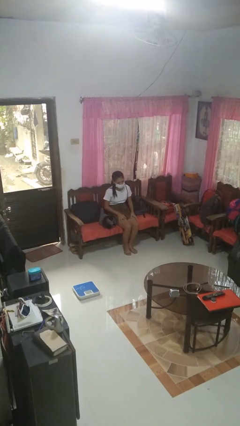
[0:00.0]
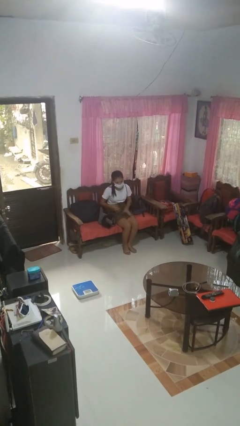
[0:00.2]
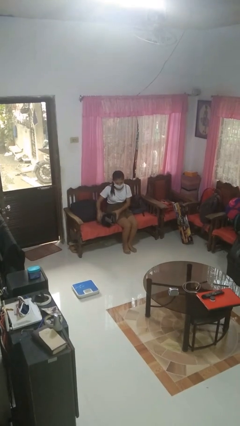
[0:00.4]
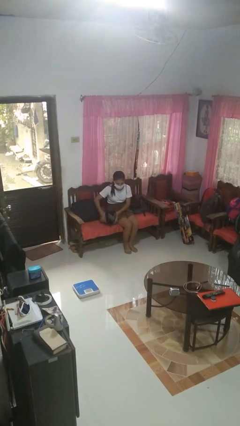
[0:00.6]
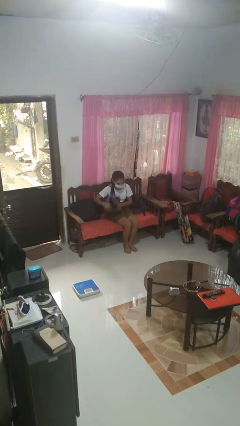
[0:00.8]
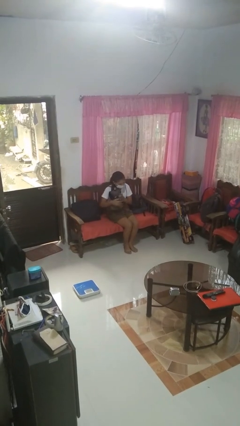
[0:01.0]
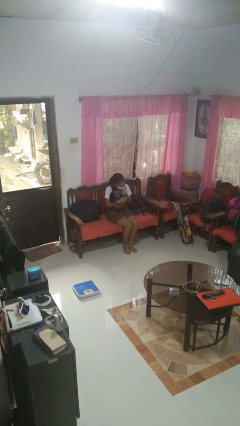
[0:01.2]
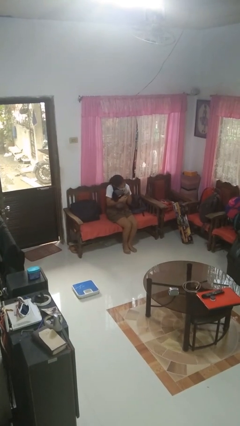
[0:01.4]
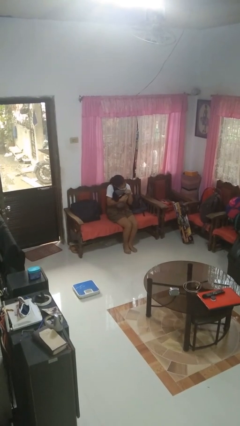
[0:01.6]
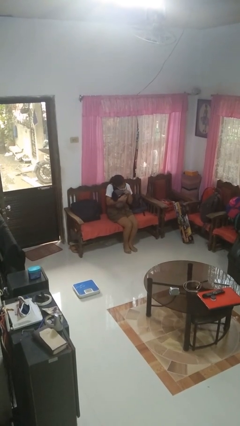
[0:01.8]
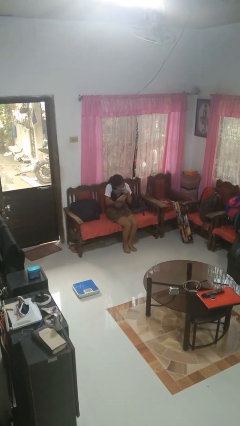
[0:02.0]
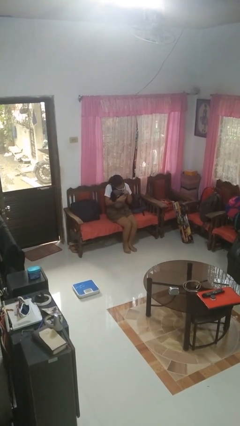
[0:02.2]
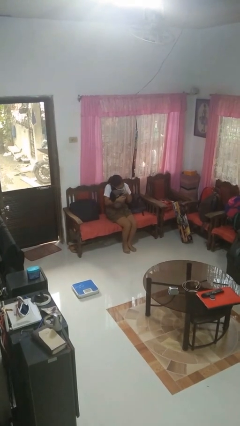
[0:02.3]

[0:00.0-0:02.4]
person hugs stuffed animal

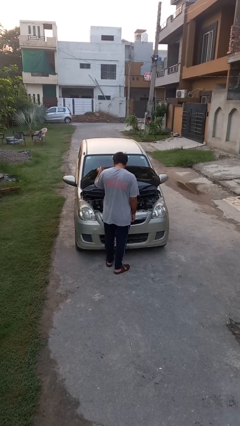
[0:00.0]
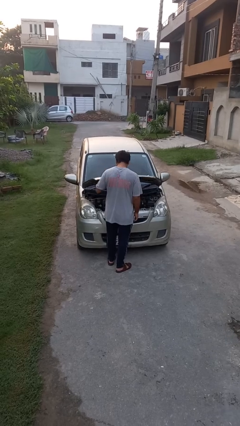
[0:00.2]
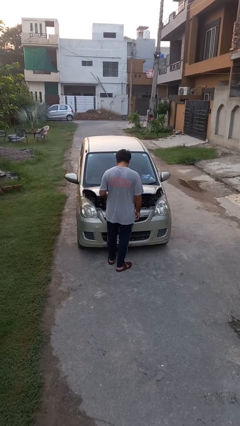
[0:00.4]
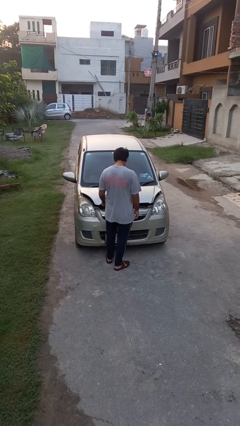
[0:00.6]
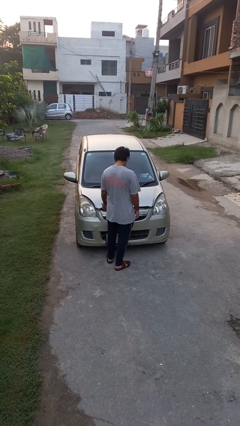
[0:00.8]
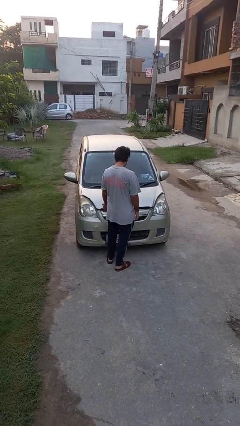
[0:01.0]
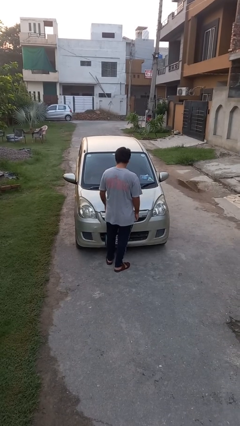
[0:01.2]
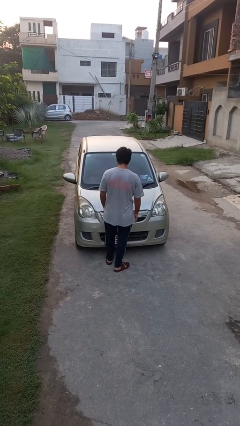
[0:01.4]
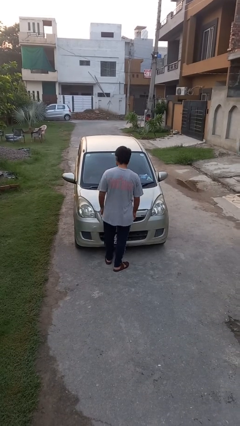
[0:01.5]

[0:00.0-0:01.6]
person closes car hood

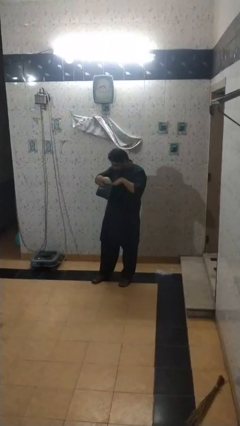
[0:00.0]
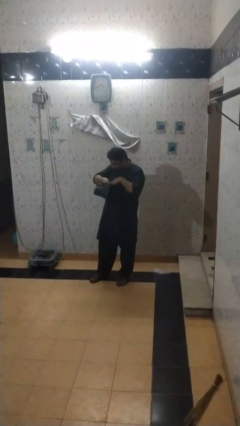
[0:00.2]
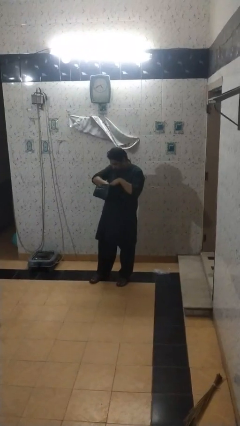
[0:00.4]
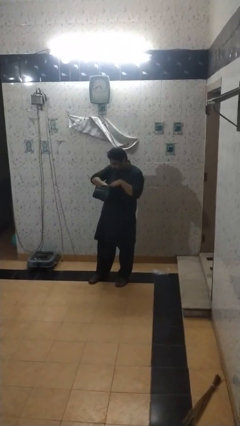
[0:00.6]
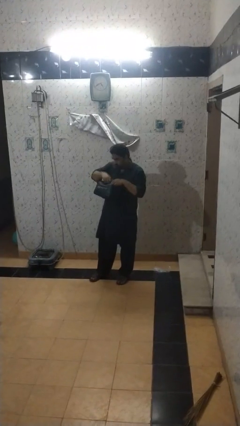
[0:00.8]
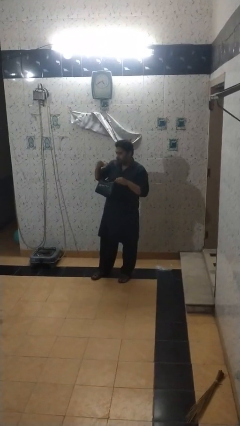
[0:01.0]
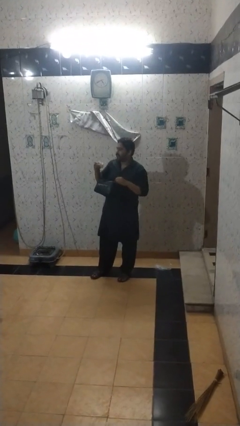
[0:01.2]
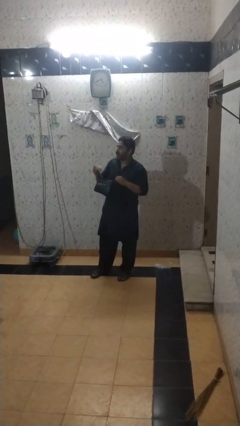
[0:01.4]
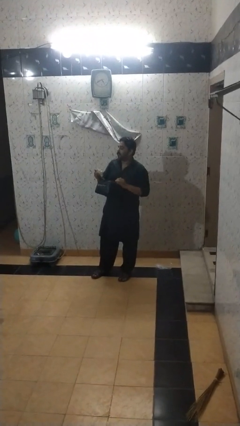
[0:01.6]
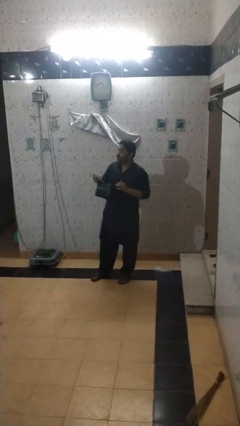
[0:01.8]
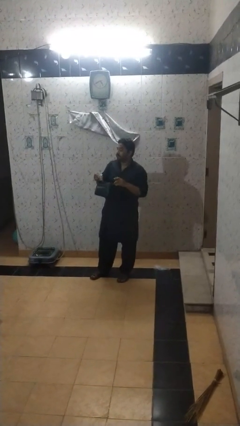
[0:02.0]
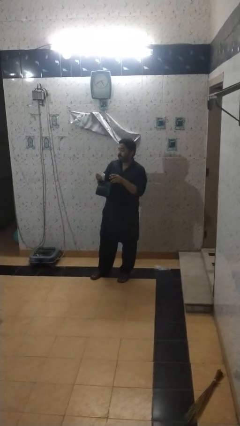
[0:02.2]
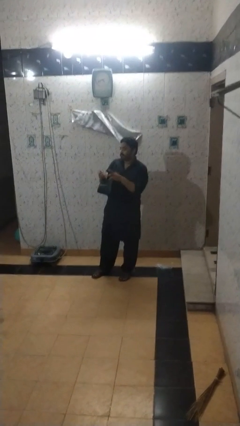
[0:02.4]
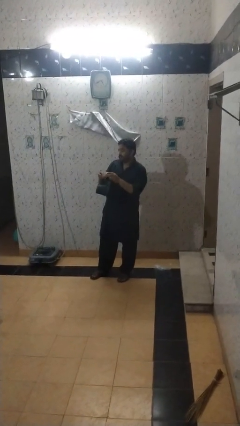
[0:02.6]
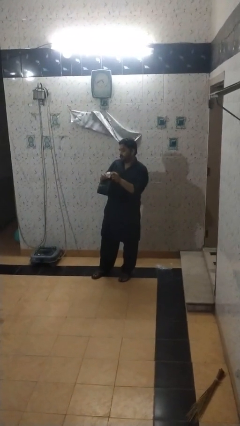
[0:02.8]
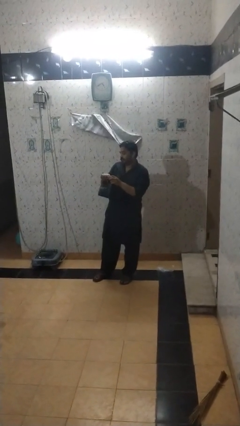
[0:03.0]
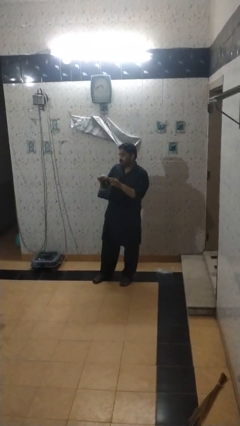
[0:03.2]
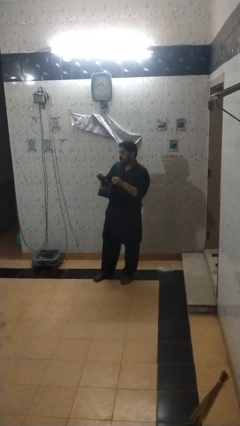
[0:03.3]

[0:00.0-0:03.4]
person takes object from backpack

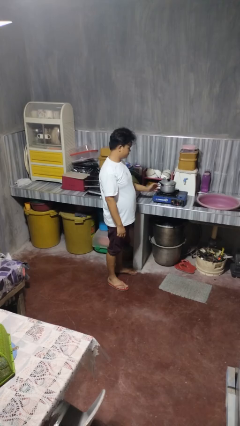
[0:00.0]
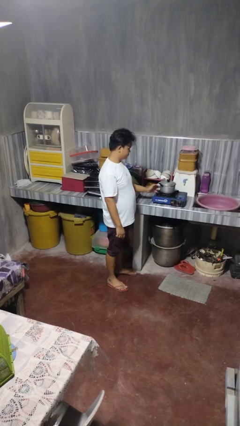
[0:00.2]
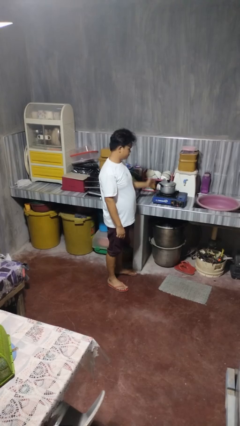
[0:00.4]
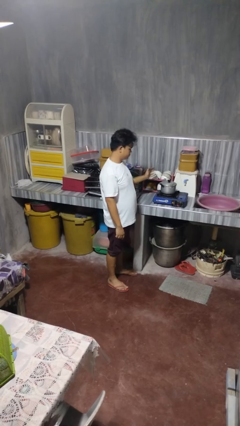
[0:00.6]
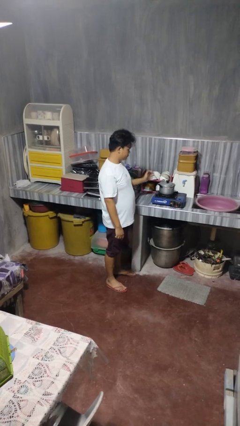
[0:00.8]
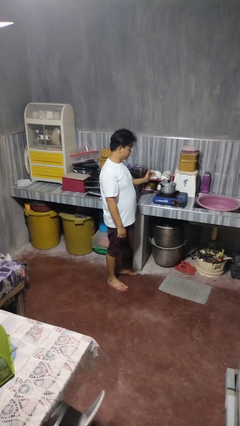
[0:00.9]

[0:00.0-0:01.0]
person burns hand

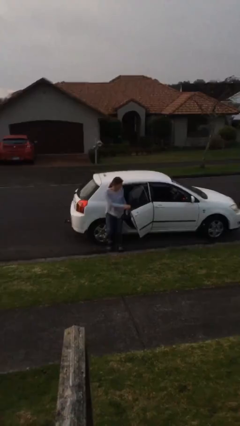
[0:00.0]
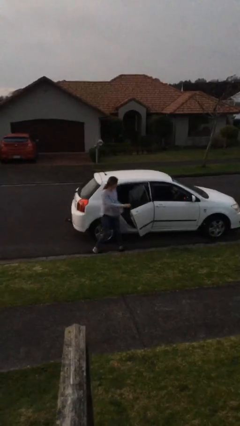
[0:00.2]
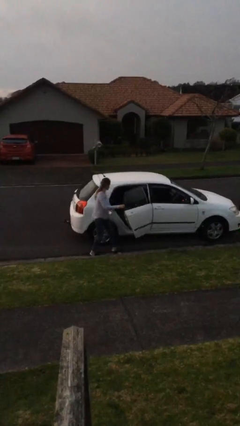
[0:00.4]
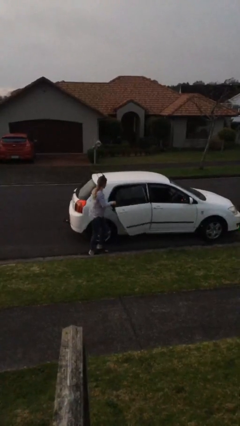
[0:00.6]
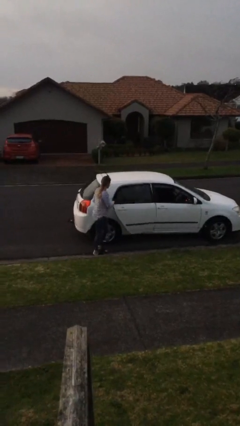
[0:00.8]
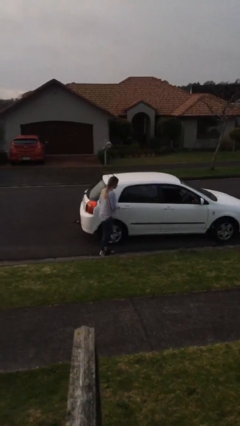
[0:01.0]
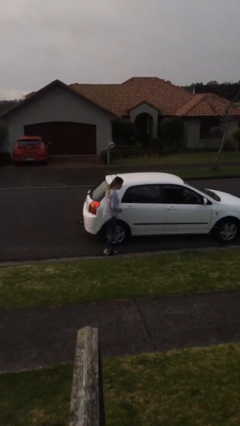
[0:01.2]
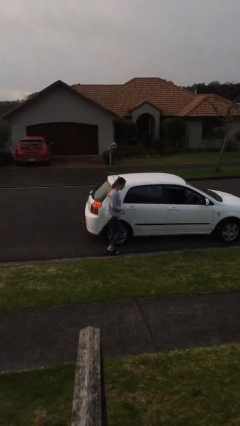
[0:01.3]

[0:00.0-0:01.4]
person closes car door

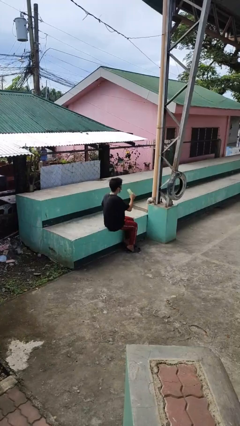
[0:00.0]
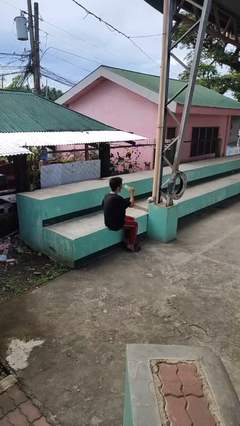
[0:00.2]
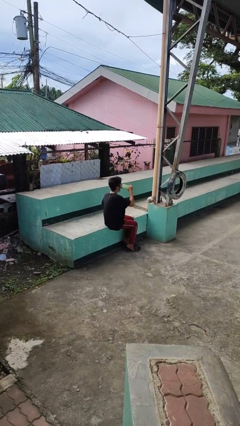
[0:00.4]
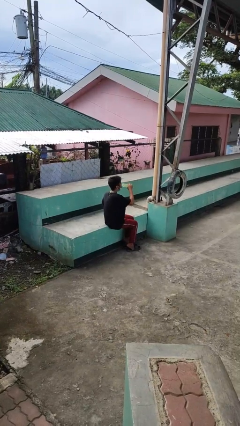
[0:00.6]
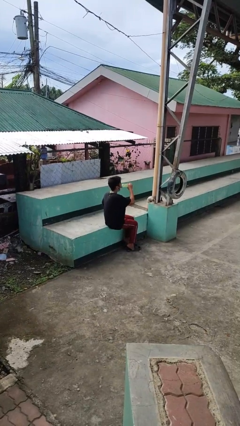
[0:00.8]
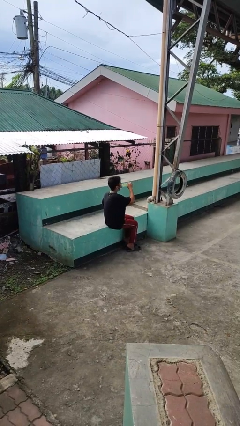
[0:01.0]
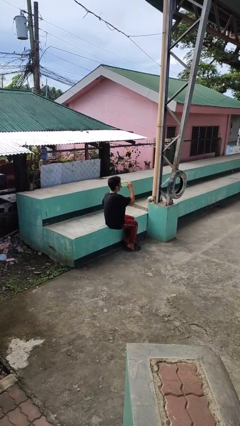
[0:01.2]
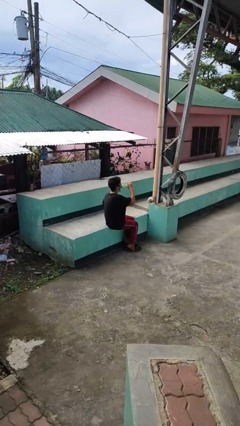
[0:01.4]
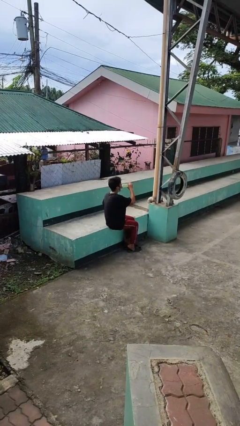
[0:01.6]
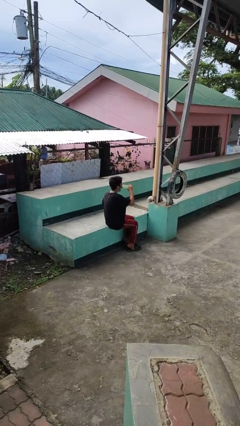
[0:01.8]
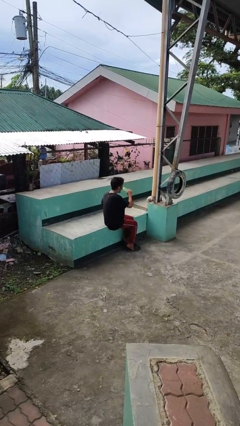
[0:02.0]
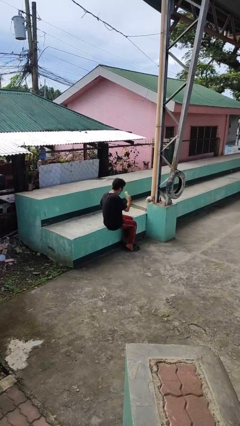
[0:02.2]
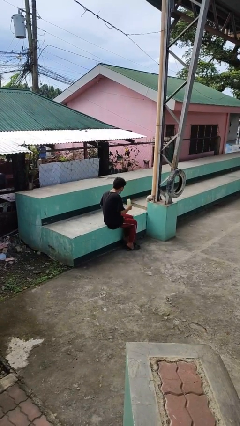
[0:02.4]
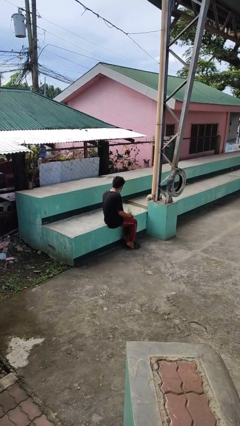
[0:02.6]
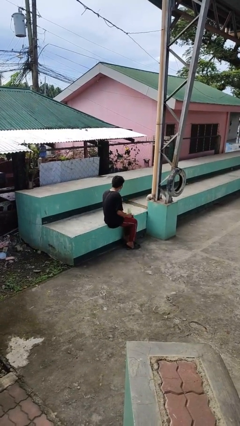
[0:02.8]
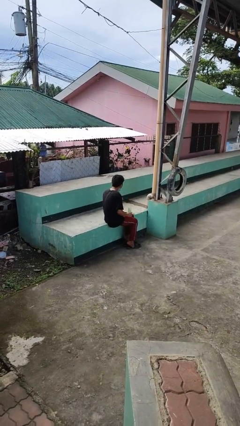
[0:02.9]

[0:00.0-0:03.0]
person drinks from bottle

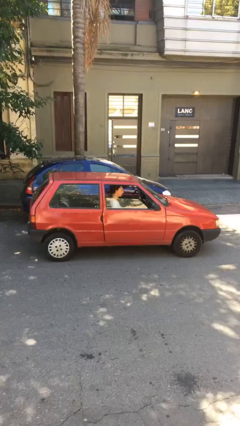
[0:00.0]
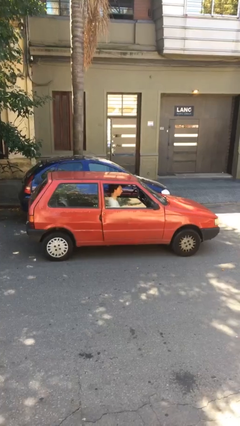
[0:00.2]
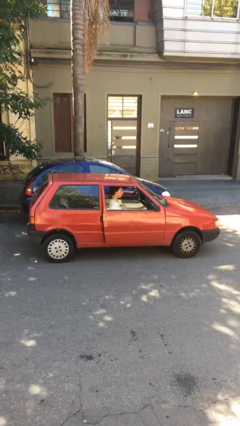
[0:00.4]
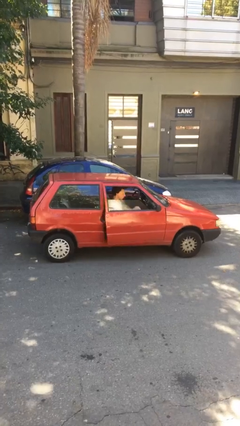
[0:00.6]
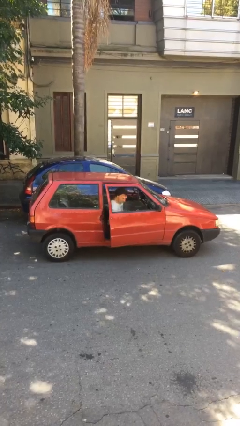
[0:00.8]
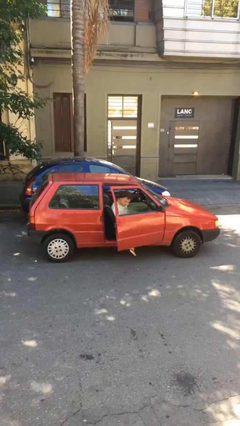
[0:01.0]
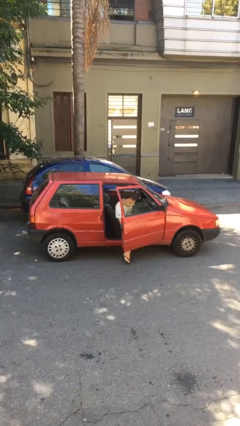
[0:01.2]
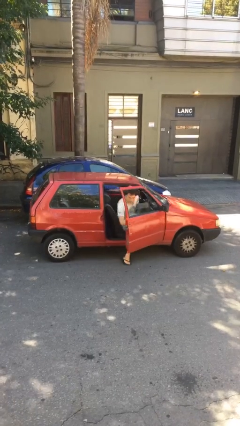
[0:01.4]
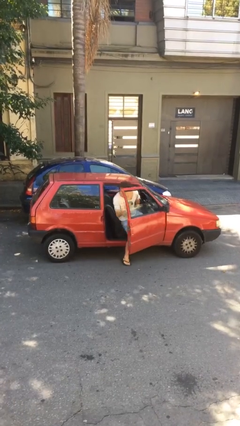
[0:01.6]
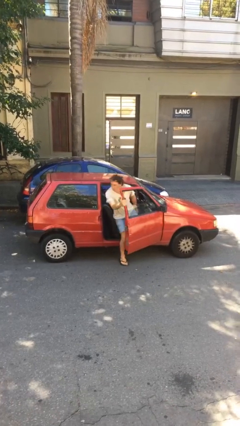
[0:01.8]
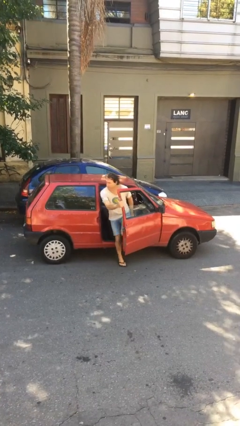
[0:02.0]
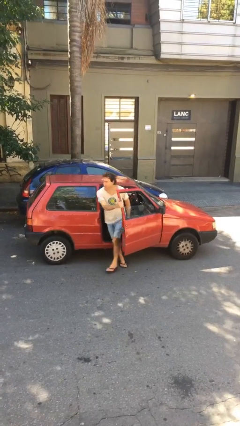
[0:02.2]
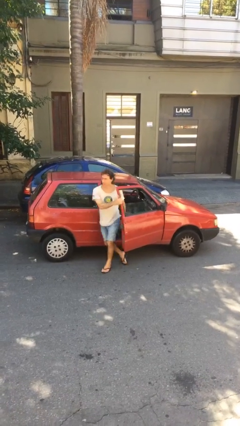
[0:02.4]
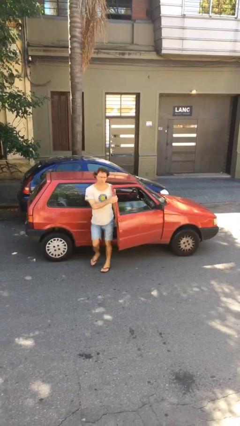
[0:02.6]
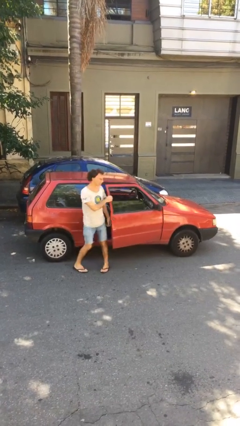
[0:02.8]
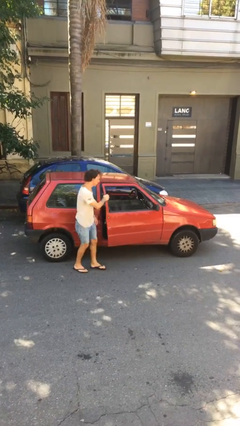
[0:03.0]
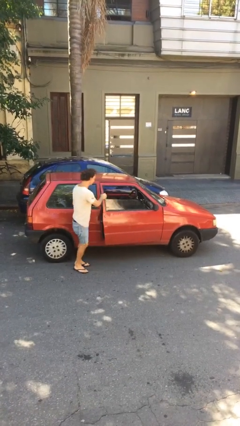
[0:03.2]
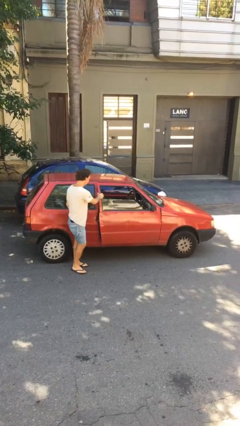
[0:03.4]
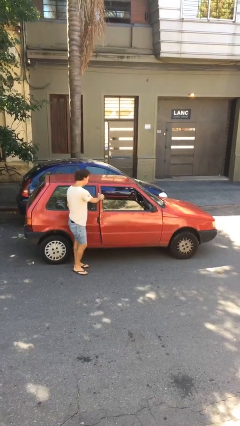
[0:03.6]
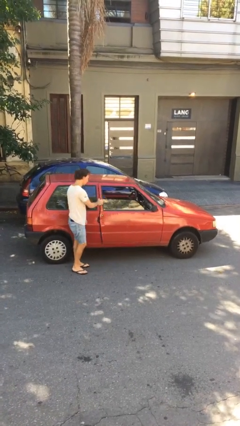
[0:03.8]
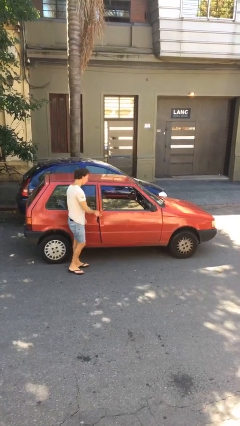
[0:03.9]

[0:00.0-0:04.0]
car drops off person
